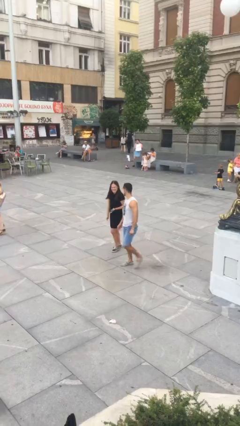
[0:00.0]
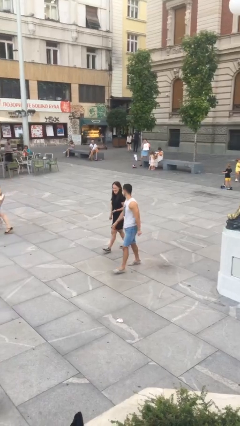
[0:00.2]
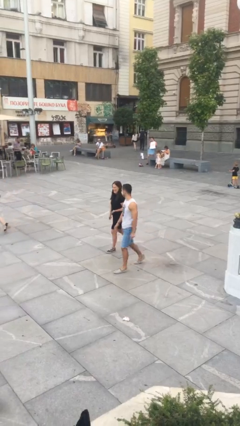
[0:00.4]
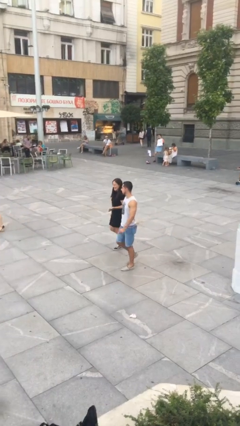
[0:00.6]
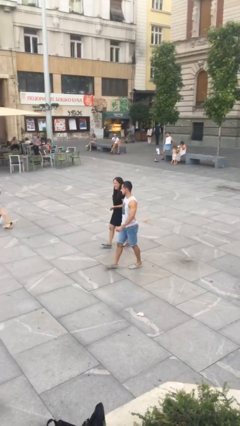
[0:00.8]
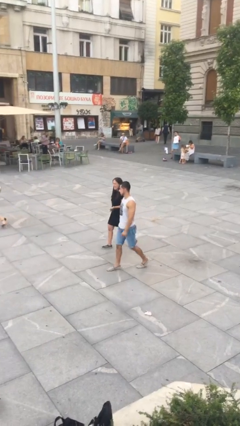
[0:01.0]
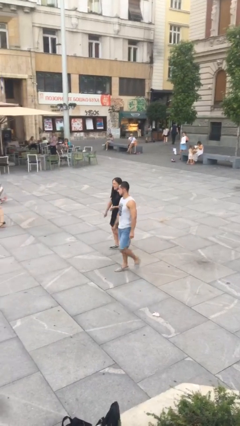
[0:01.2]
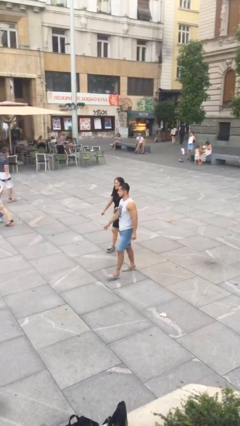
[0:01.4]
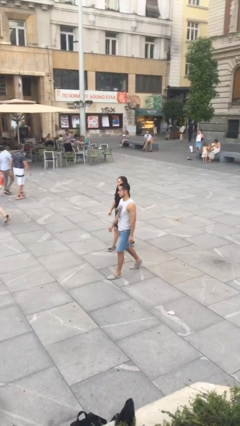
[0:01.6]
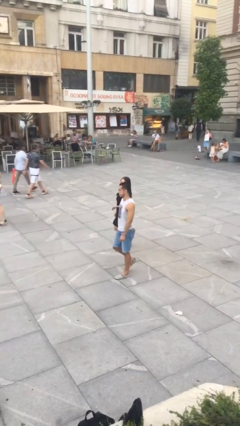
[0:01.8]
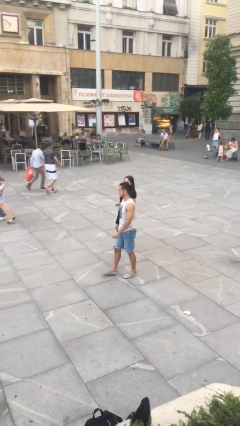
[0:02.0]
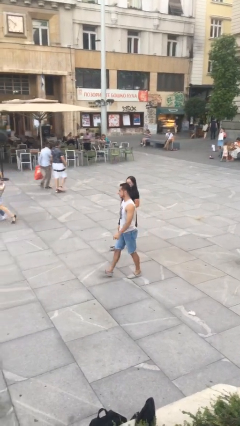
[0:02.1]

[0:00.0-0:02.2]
person talks to person

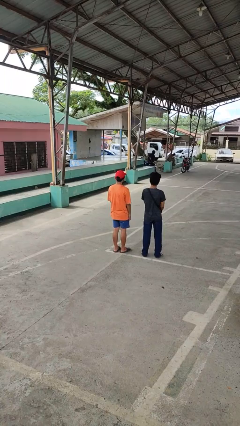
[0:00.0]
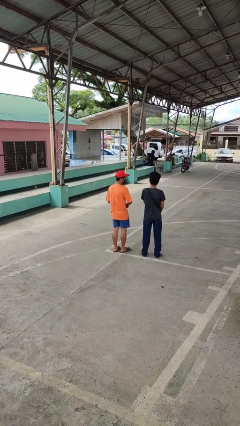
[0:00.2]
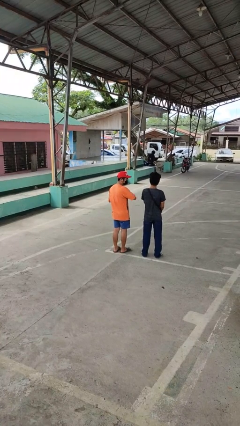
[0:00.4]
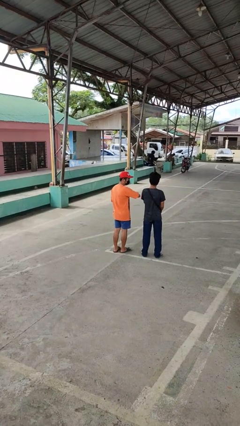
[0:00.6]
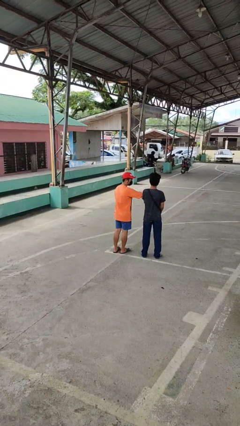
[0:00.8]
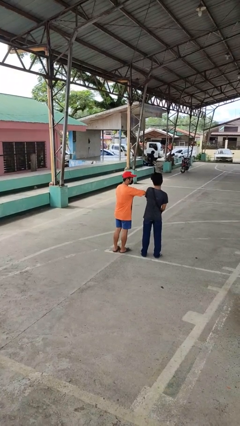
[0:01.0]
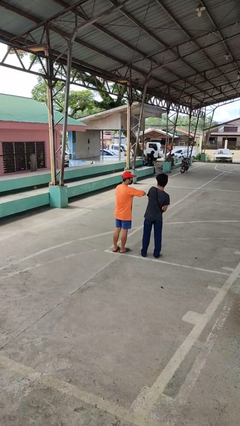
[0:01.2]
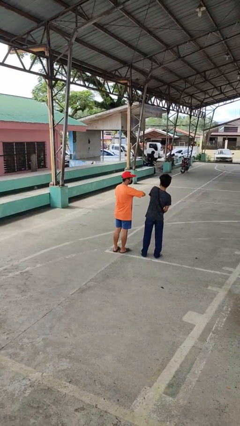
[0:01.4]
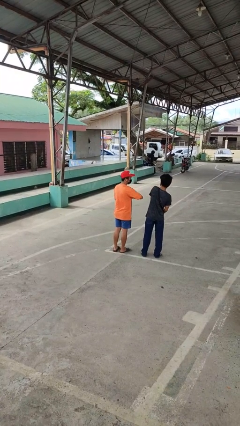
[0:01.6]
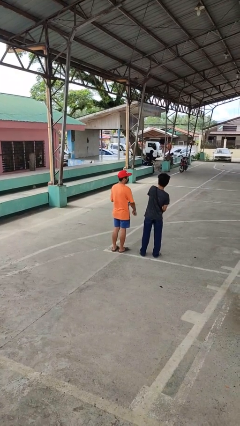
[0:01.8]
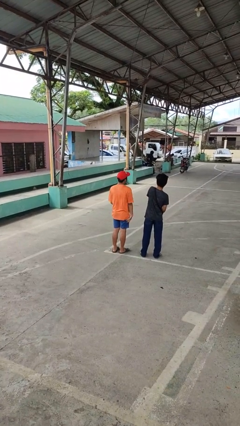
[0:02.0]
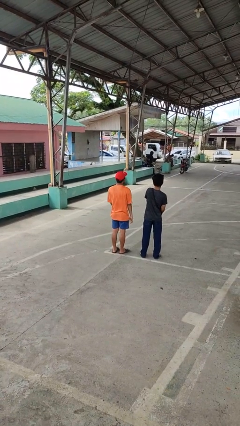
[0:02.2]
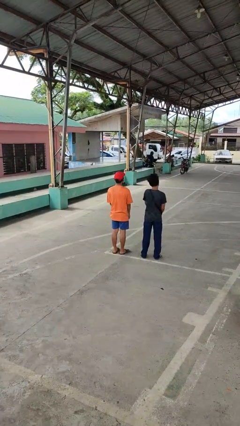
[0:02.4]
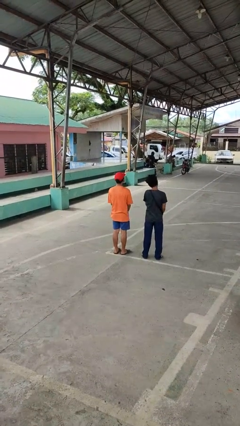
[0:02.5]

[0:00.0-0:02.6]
person nudges person with elbow

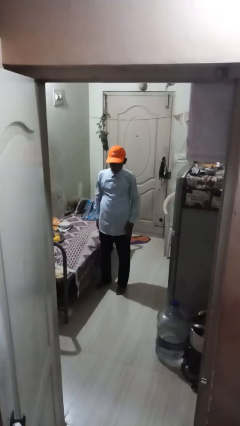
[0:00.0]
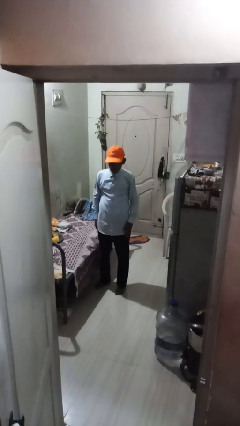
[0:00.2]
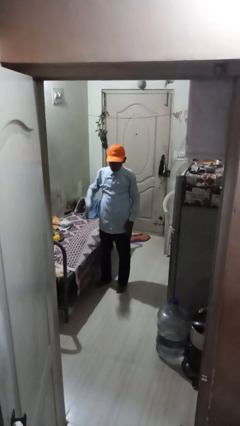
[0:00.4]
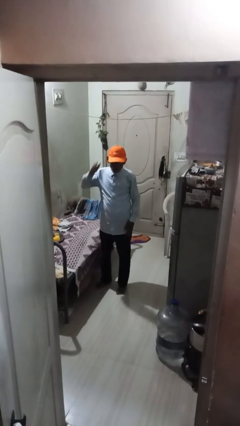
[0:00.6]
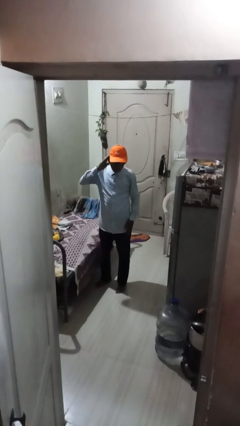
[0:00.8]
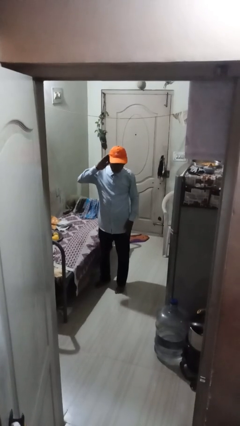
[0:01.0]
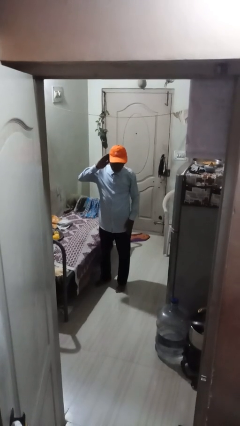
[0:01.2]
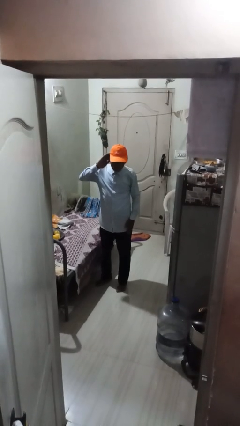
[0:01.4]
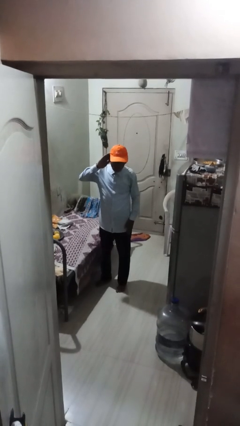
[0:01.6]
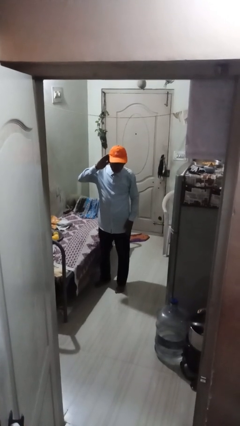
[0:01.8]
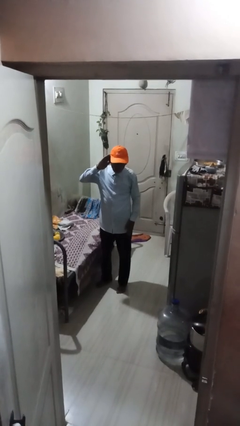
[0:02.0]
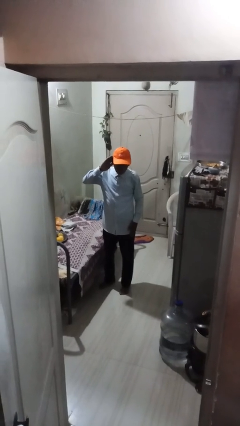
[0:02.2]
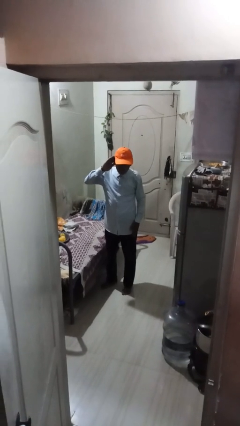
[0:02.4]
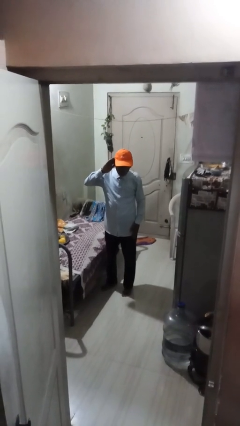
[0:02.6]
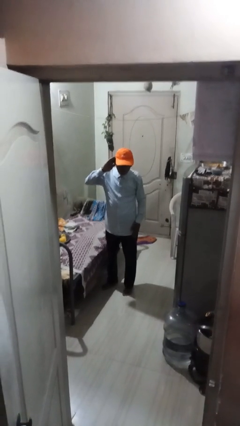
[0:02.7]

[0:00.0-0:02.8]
person gestures listen closely

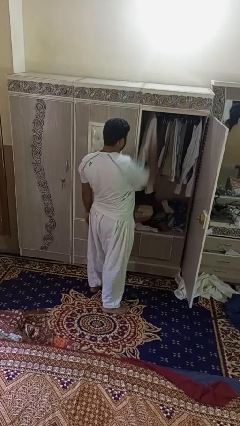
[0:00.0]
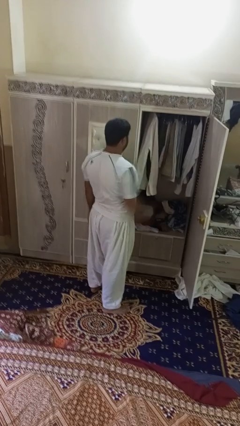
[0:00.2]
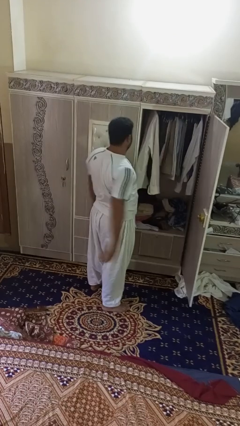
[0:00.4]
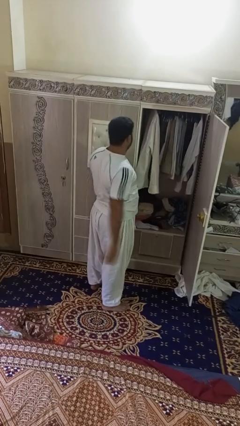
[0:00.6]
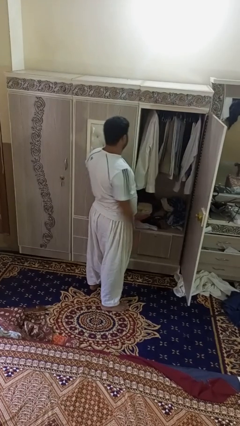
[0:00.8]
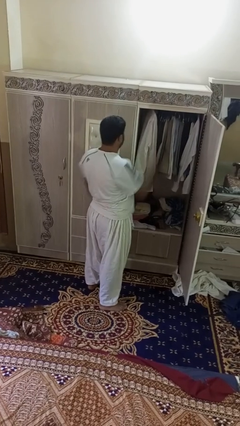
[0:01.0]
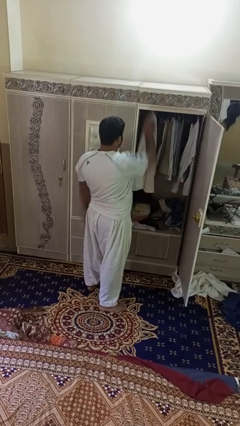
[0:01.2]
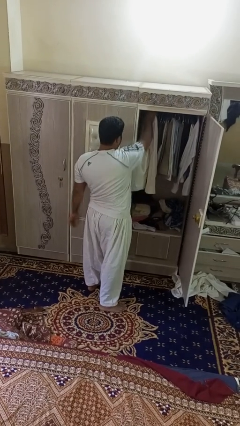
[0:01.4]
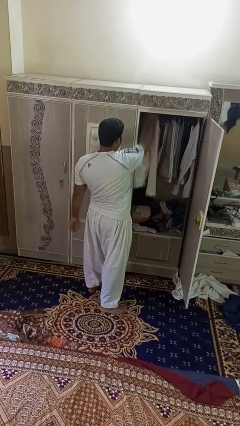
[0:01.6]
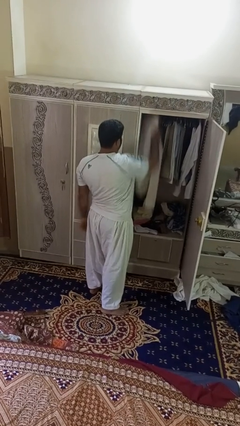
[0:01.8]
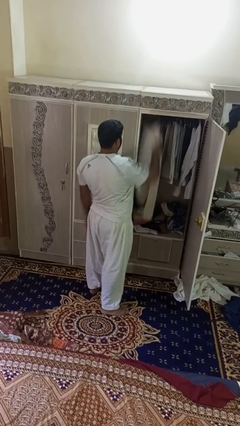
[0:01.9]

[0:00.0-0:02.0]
person takes clothes from closet

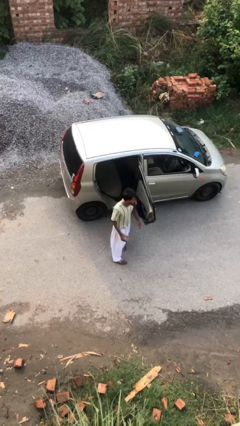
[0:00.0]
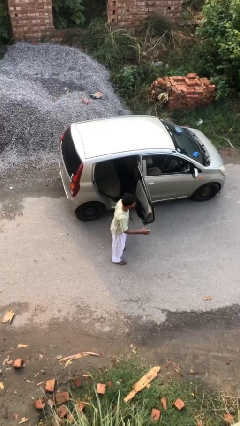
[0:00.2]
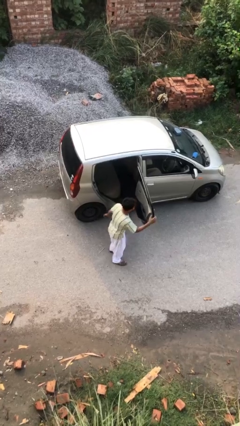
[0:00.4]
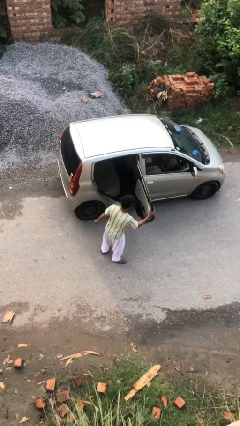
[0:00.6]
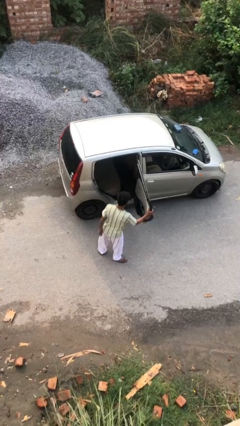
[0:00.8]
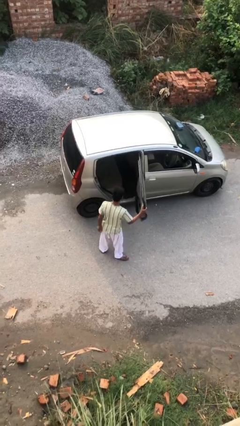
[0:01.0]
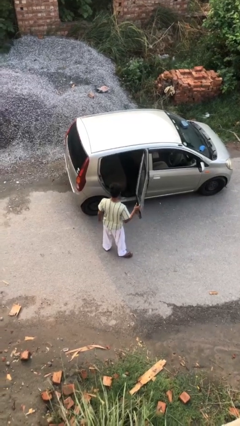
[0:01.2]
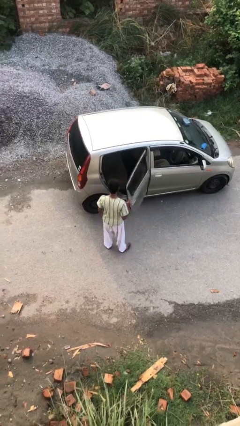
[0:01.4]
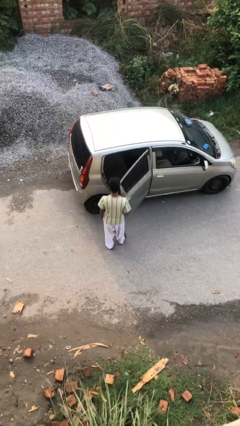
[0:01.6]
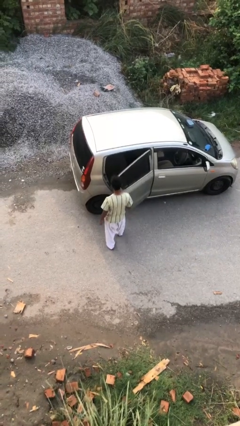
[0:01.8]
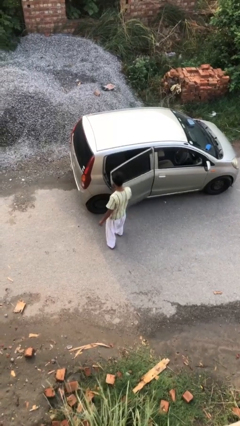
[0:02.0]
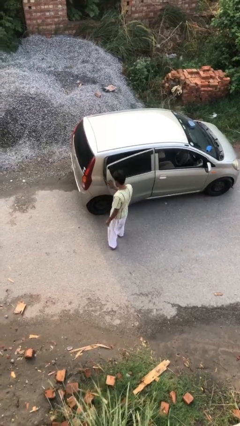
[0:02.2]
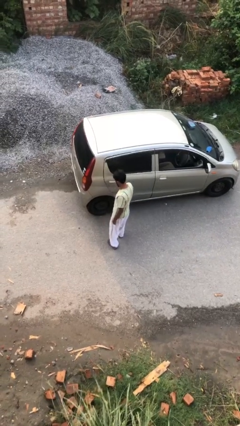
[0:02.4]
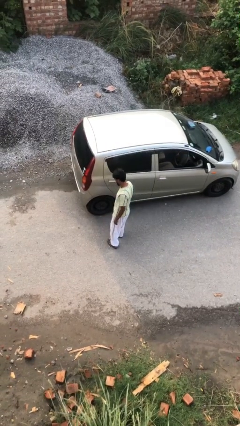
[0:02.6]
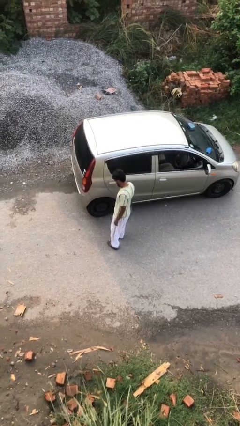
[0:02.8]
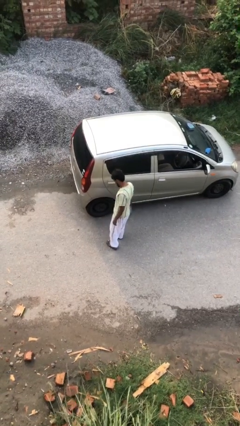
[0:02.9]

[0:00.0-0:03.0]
person closes car door

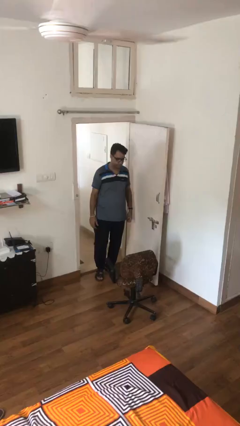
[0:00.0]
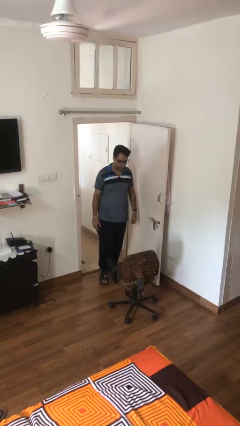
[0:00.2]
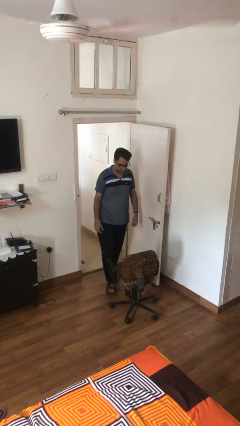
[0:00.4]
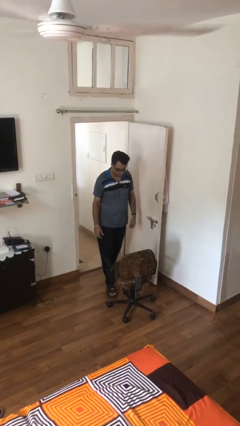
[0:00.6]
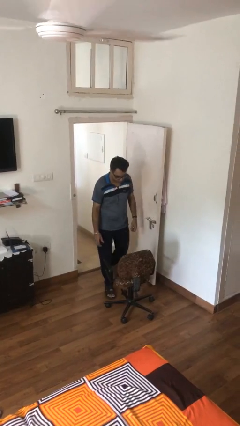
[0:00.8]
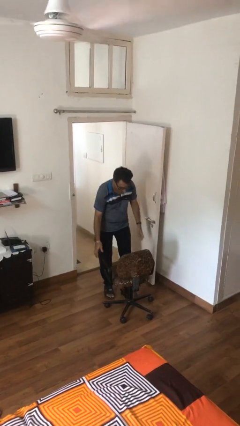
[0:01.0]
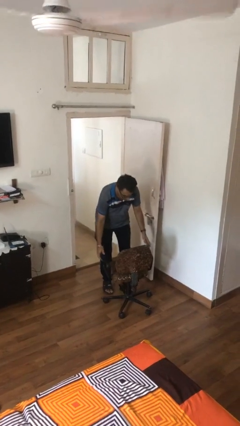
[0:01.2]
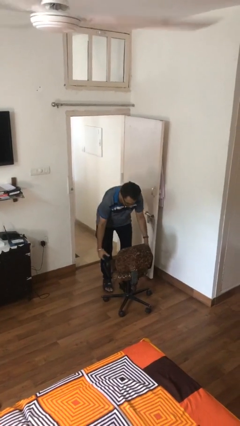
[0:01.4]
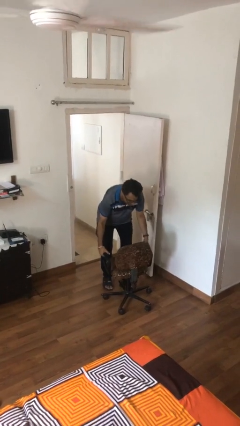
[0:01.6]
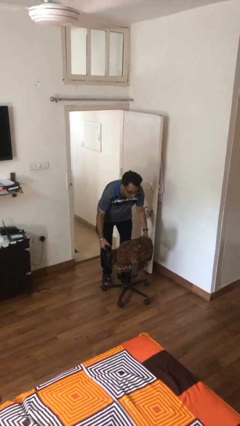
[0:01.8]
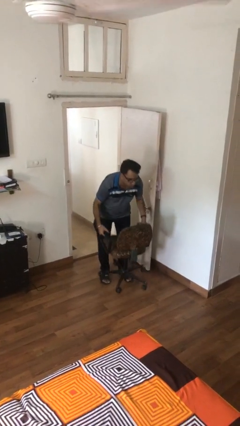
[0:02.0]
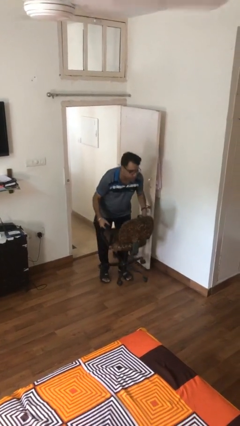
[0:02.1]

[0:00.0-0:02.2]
person picks up object from floor

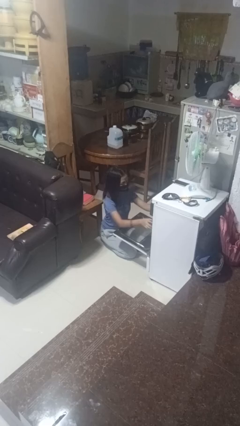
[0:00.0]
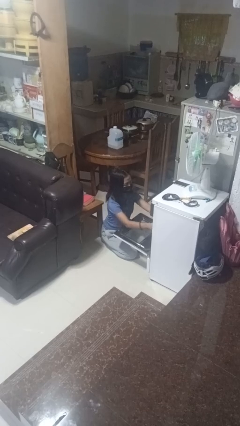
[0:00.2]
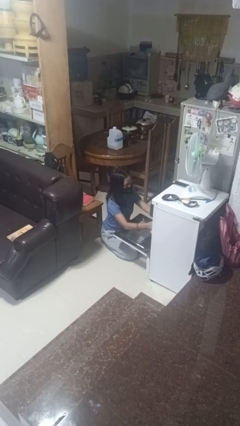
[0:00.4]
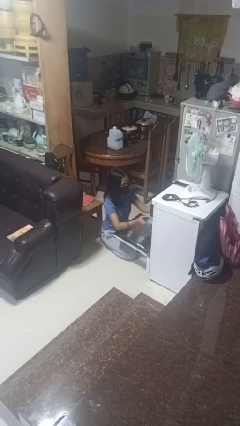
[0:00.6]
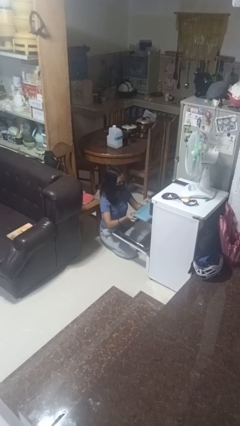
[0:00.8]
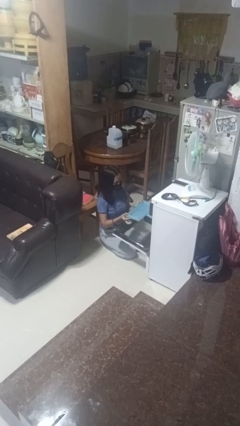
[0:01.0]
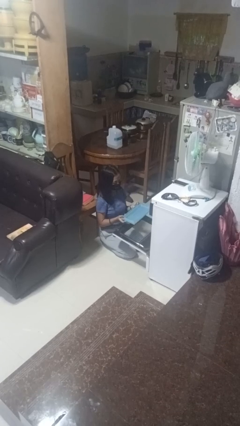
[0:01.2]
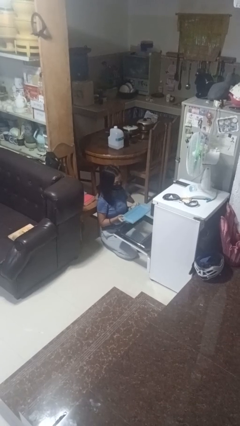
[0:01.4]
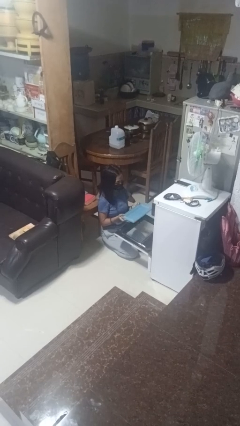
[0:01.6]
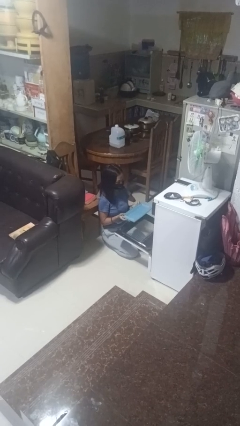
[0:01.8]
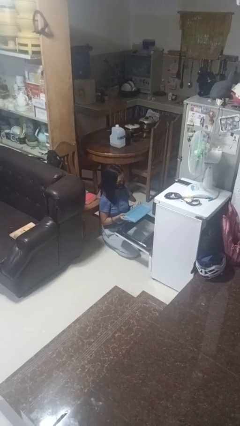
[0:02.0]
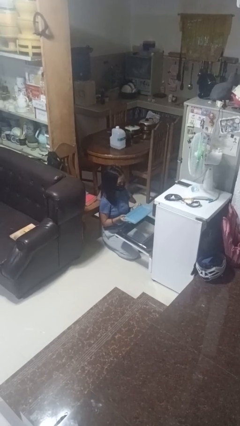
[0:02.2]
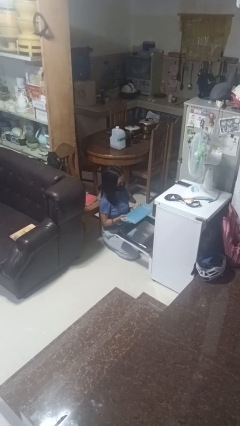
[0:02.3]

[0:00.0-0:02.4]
person takes object from oven
